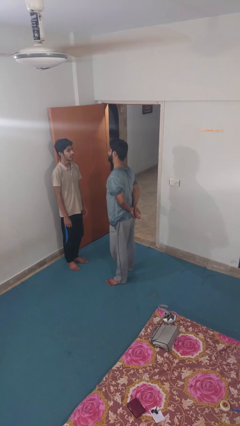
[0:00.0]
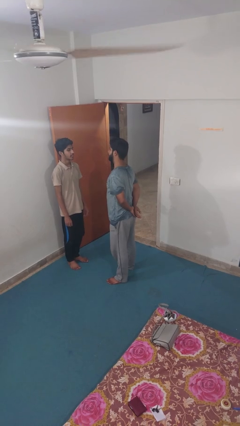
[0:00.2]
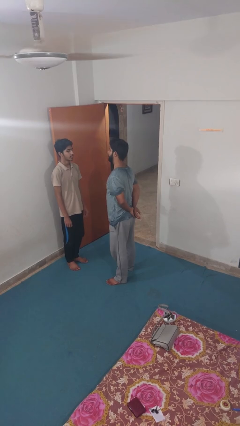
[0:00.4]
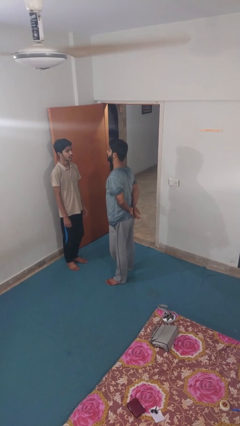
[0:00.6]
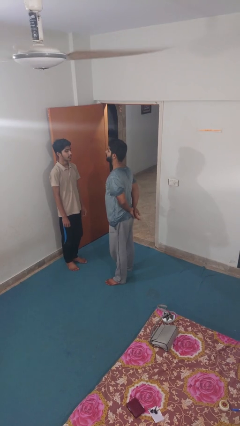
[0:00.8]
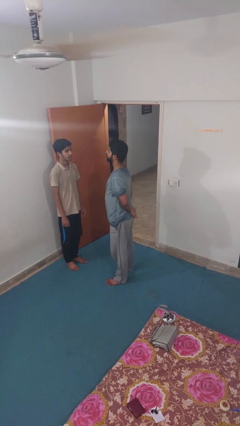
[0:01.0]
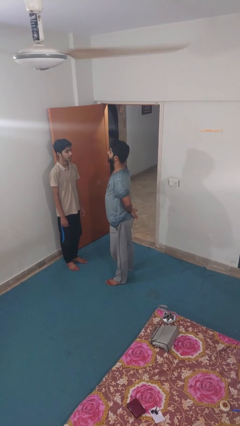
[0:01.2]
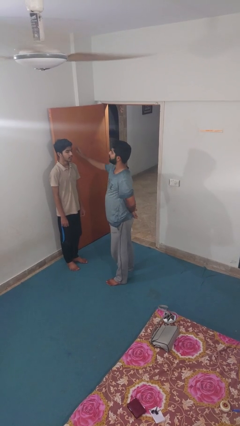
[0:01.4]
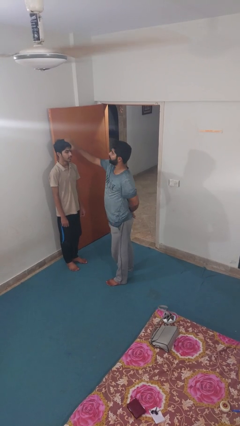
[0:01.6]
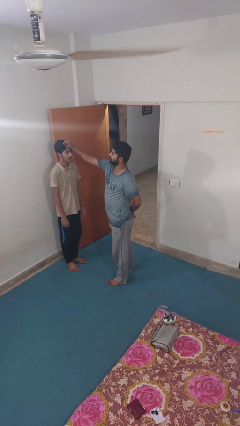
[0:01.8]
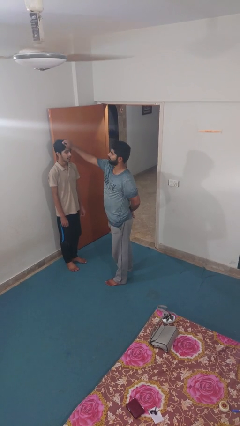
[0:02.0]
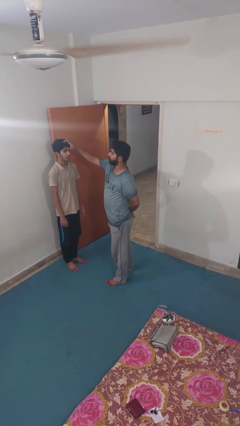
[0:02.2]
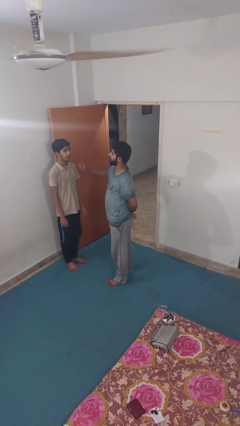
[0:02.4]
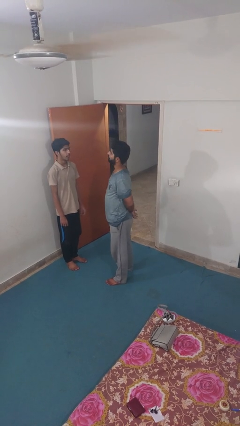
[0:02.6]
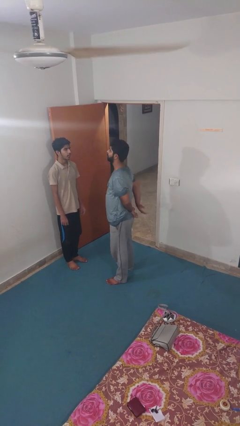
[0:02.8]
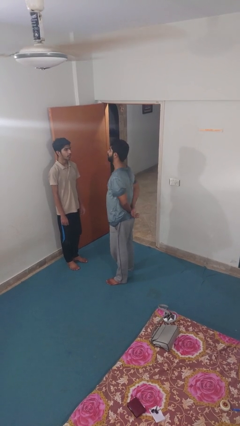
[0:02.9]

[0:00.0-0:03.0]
person grabs person by hair

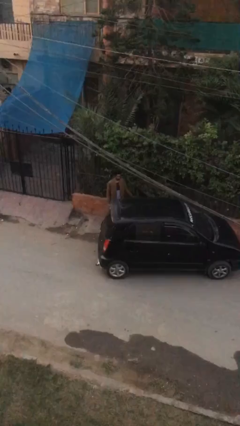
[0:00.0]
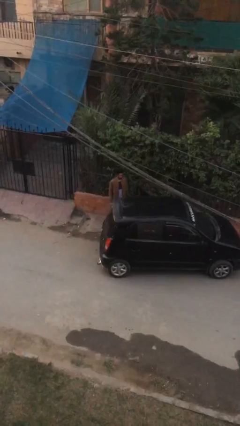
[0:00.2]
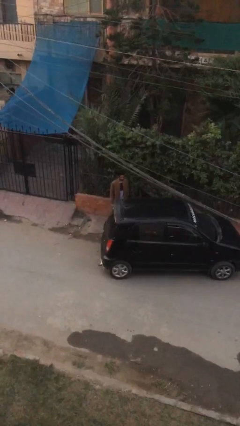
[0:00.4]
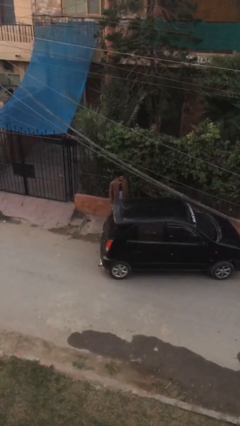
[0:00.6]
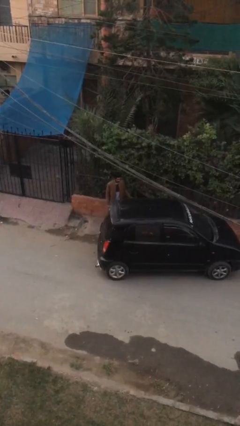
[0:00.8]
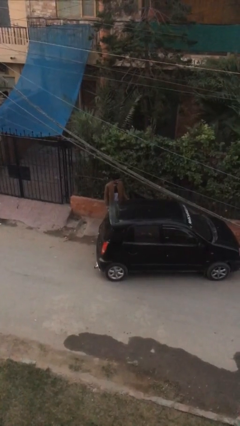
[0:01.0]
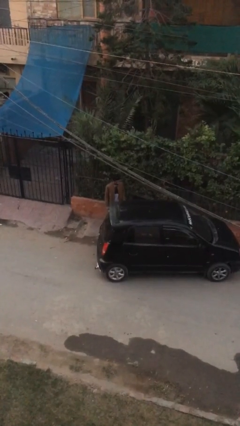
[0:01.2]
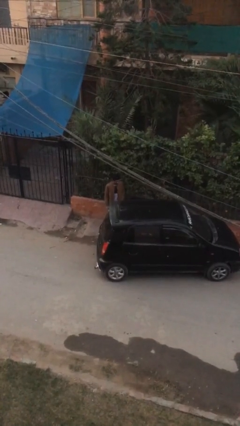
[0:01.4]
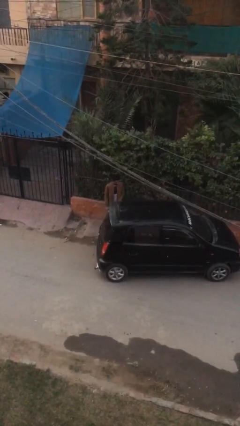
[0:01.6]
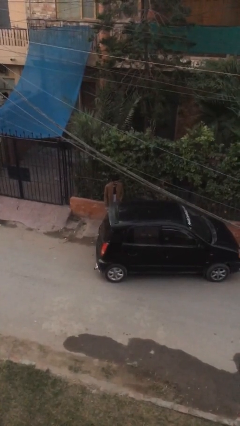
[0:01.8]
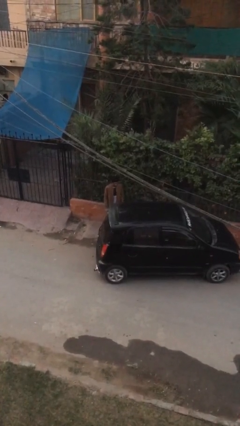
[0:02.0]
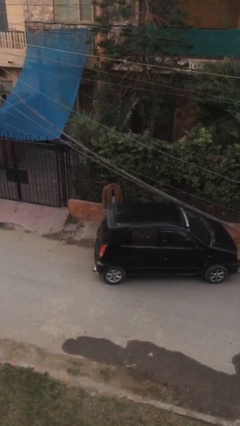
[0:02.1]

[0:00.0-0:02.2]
person closes car door

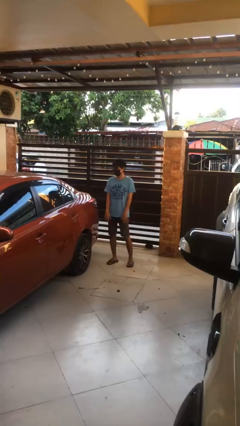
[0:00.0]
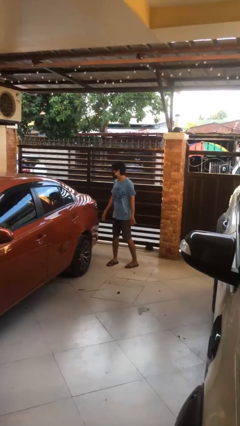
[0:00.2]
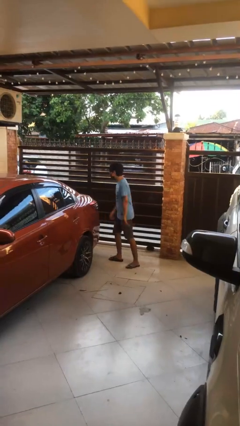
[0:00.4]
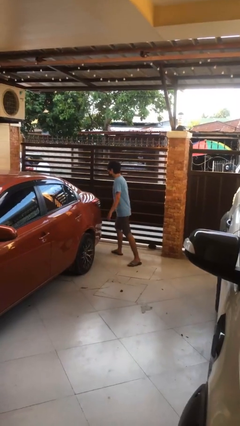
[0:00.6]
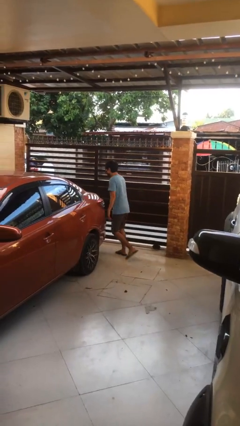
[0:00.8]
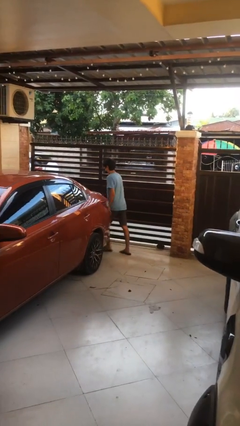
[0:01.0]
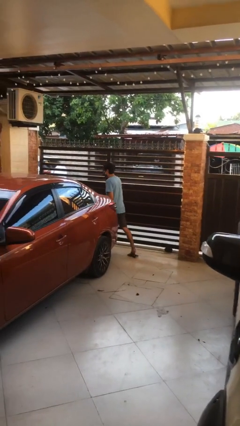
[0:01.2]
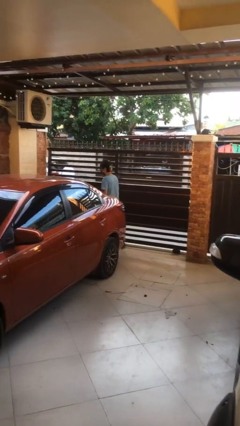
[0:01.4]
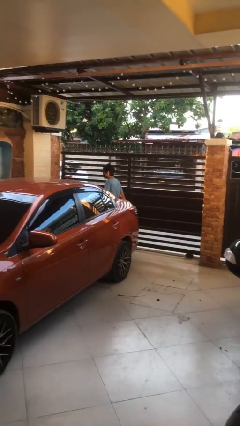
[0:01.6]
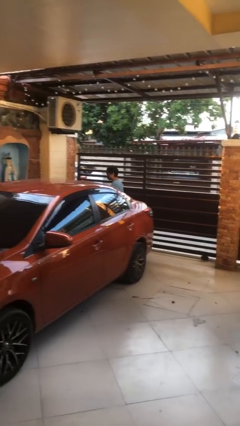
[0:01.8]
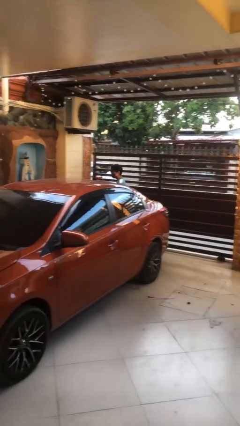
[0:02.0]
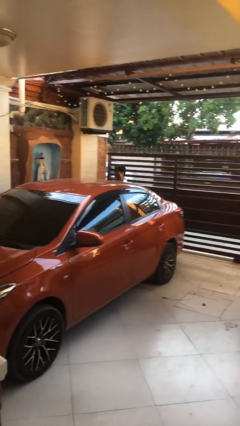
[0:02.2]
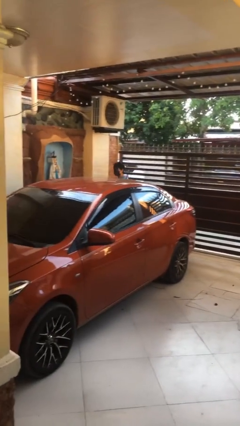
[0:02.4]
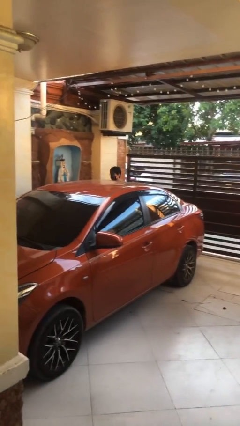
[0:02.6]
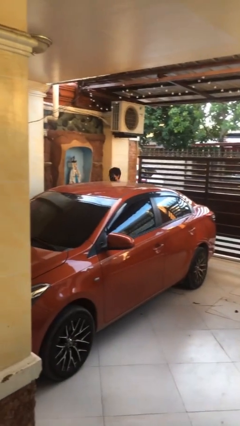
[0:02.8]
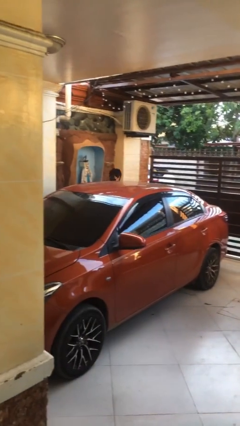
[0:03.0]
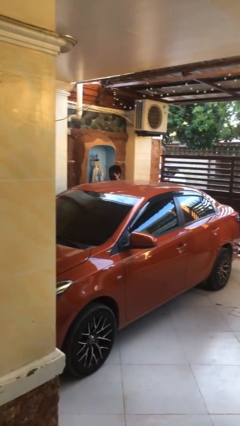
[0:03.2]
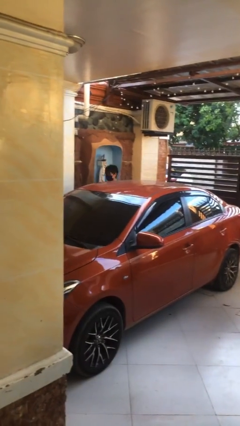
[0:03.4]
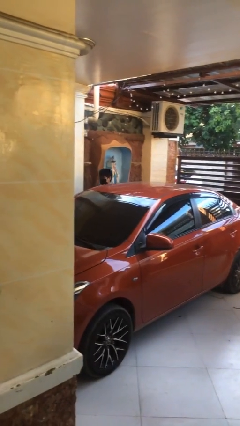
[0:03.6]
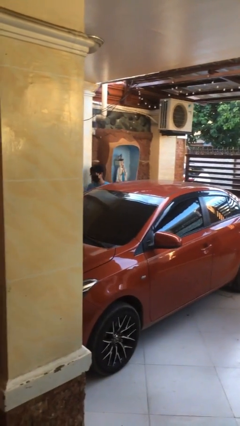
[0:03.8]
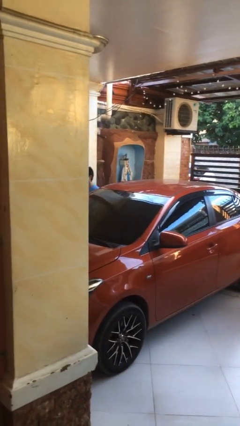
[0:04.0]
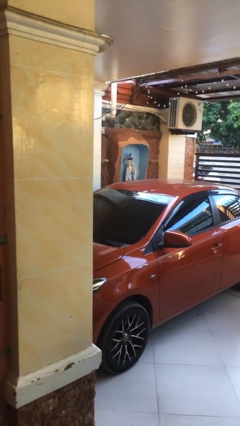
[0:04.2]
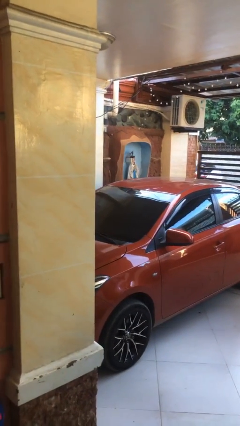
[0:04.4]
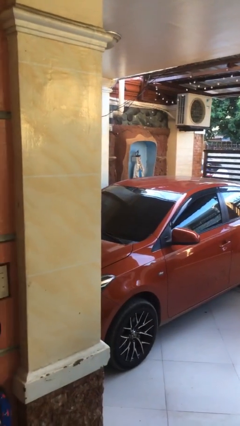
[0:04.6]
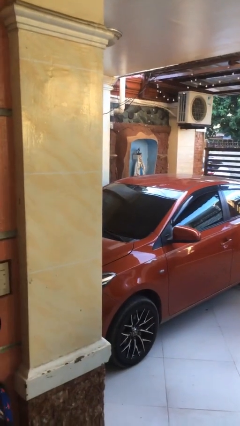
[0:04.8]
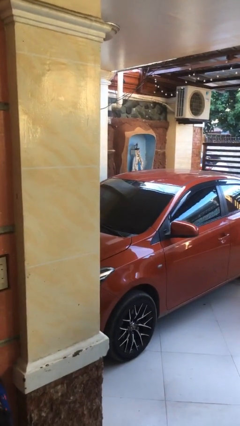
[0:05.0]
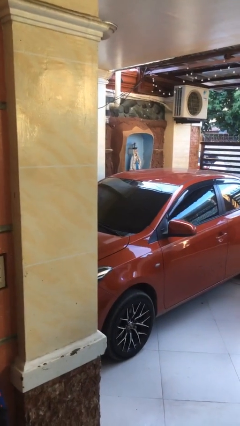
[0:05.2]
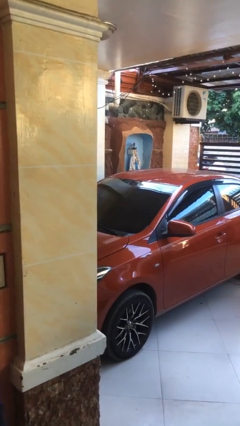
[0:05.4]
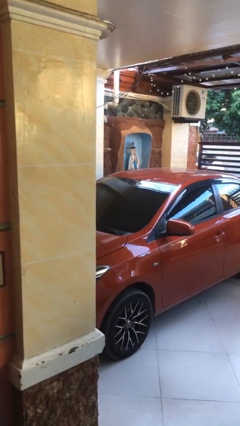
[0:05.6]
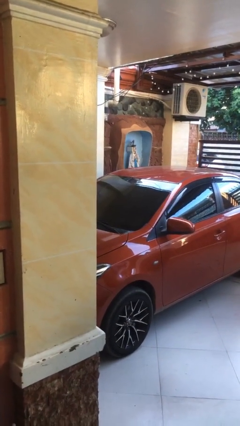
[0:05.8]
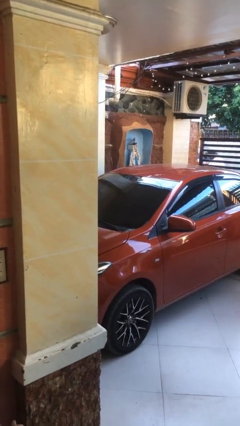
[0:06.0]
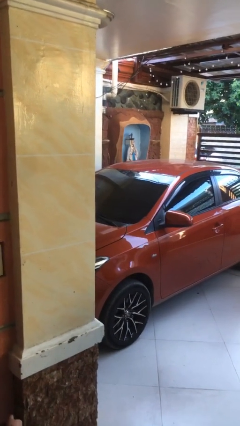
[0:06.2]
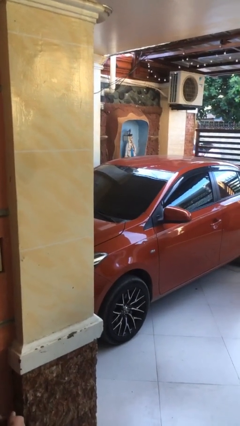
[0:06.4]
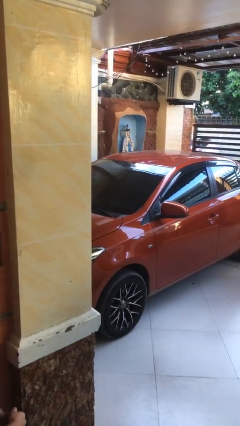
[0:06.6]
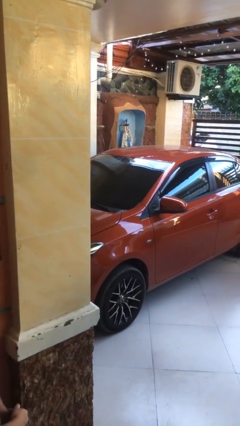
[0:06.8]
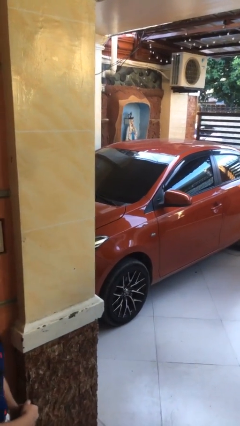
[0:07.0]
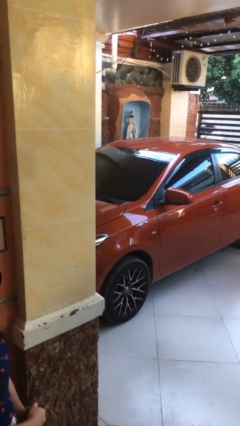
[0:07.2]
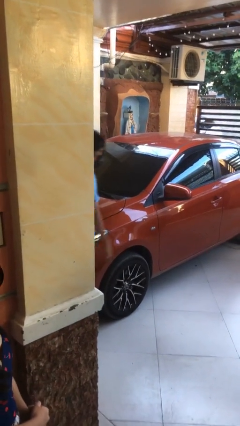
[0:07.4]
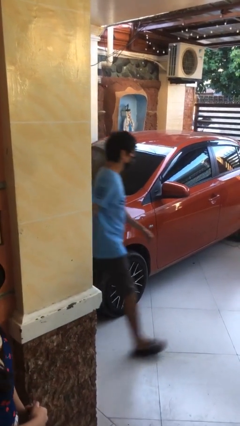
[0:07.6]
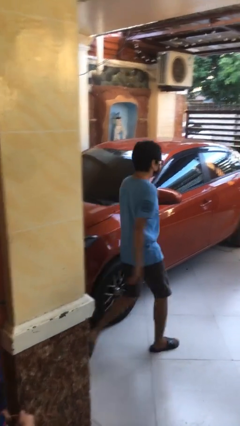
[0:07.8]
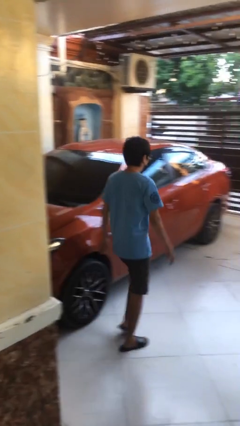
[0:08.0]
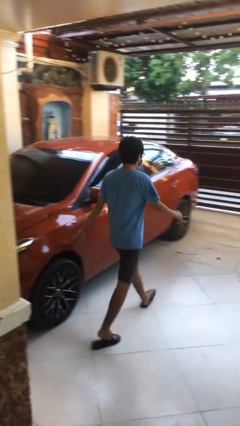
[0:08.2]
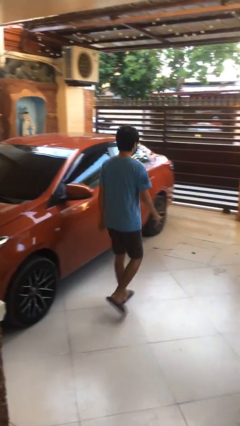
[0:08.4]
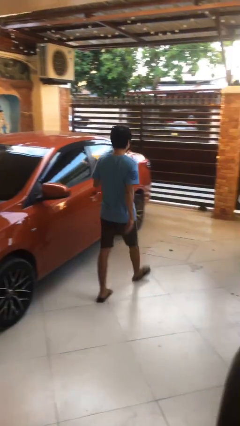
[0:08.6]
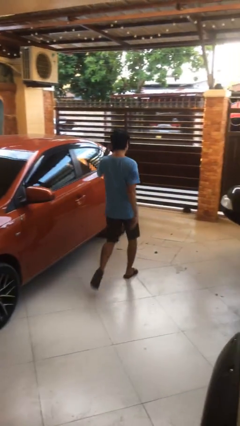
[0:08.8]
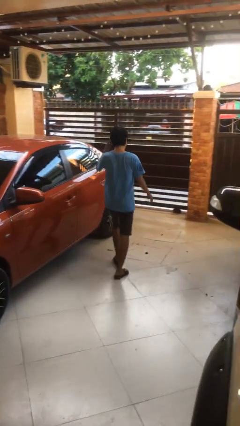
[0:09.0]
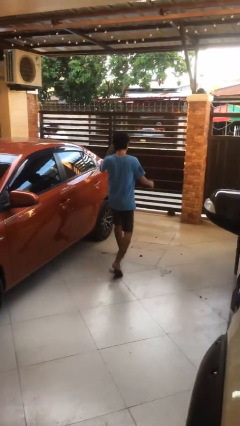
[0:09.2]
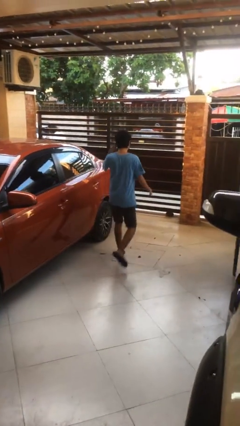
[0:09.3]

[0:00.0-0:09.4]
person walks around car

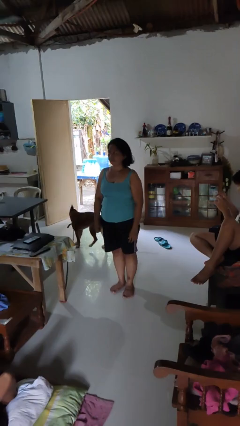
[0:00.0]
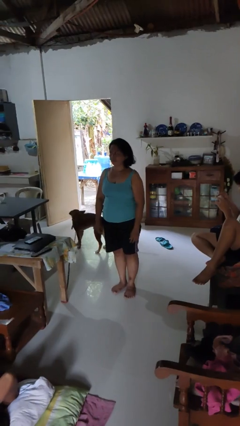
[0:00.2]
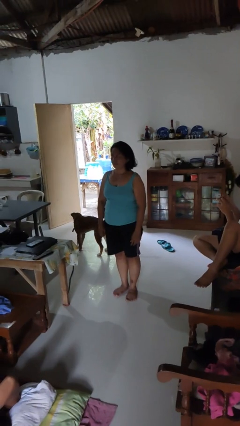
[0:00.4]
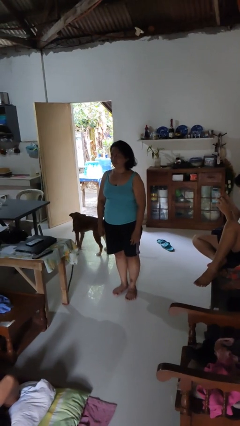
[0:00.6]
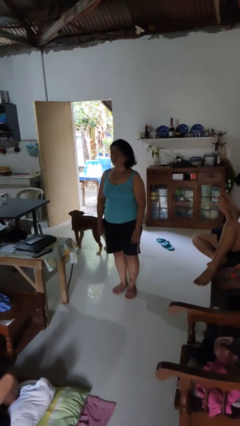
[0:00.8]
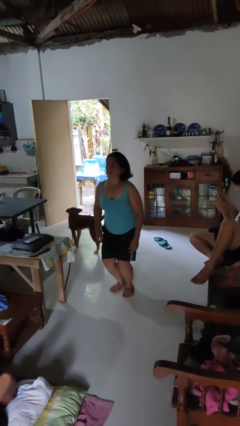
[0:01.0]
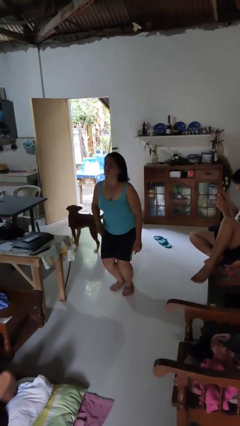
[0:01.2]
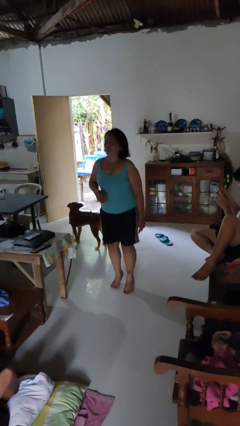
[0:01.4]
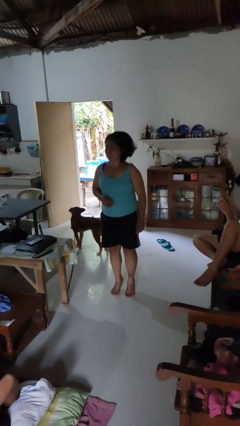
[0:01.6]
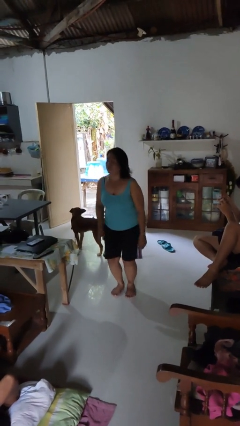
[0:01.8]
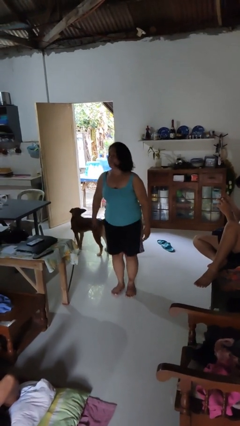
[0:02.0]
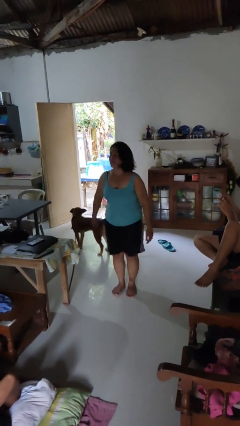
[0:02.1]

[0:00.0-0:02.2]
person jumps

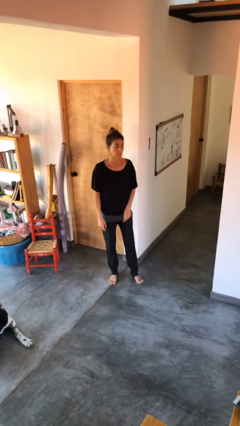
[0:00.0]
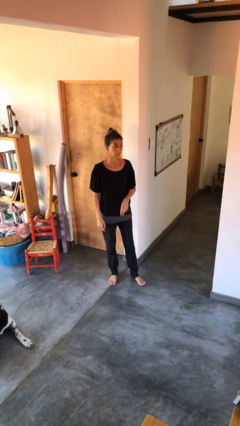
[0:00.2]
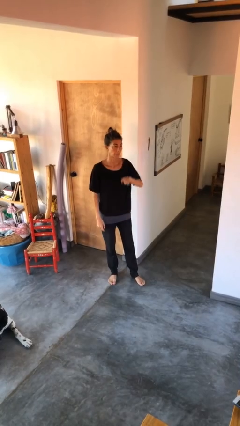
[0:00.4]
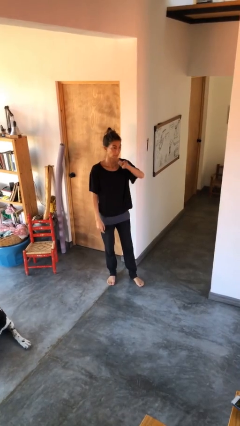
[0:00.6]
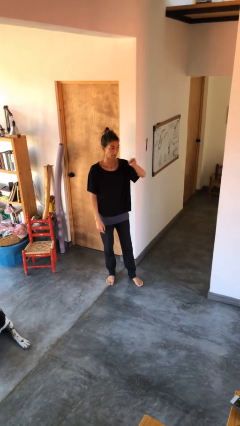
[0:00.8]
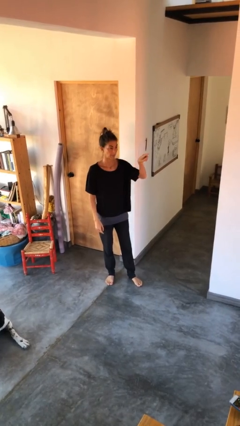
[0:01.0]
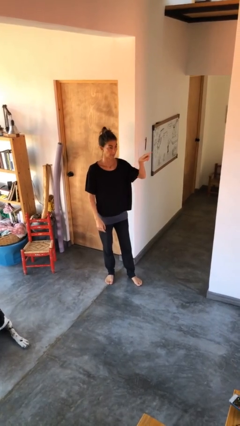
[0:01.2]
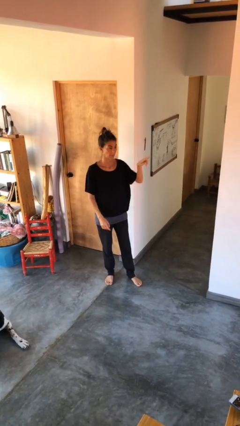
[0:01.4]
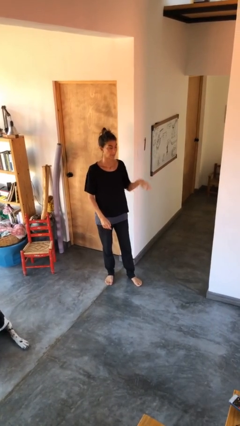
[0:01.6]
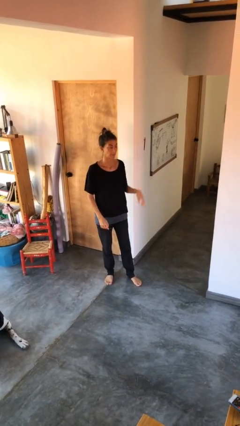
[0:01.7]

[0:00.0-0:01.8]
person gestures swipe left
